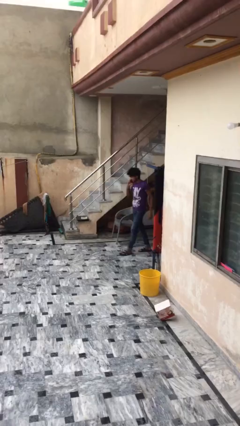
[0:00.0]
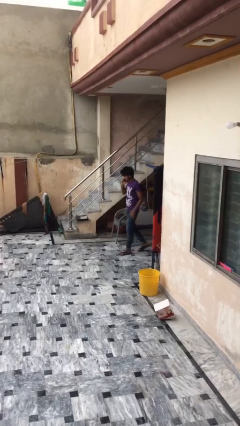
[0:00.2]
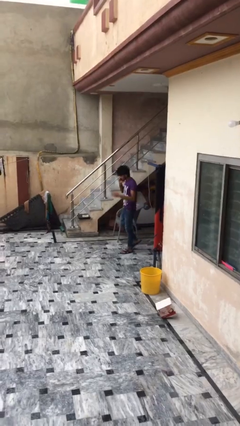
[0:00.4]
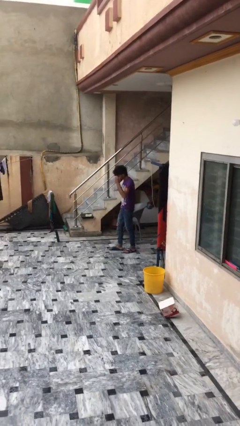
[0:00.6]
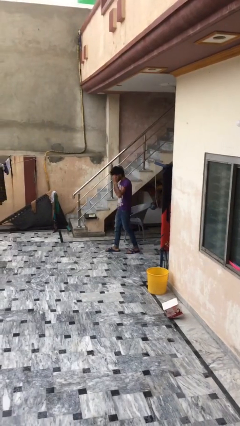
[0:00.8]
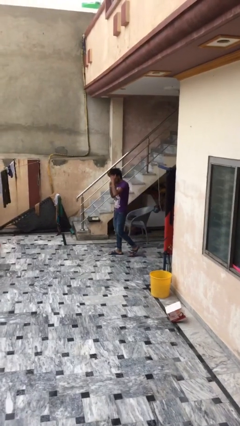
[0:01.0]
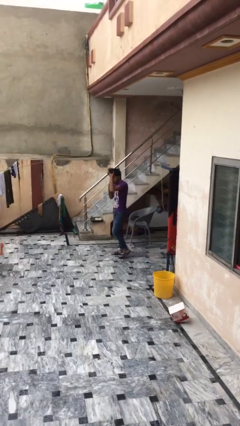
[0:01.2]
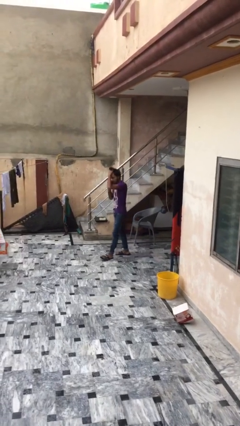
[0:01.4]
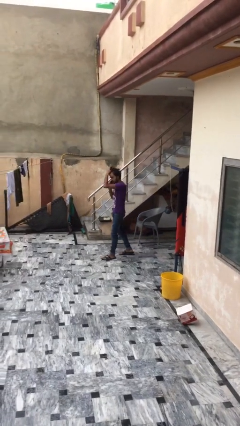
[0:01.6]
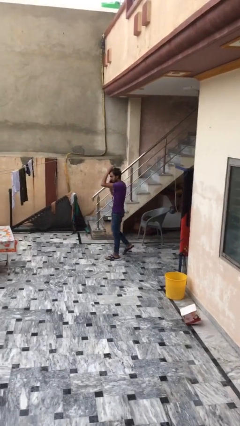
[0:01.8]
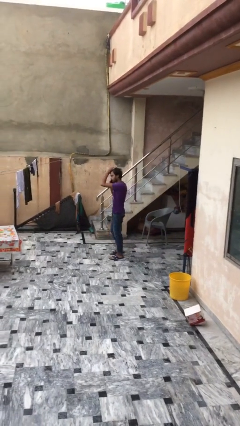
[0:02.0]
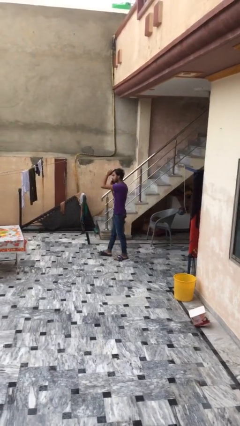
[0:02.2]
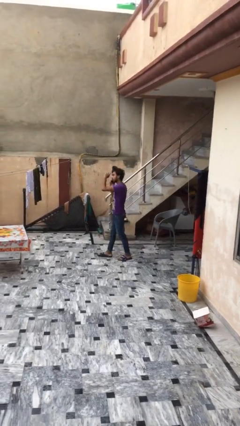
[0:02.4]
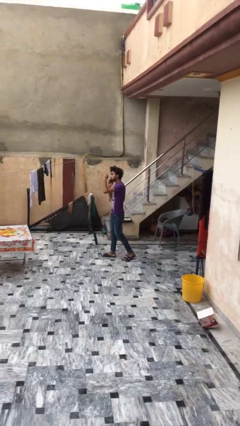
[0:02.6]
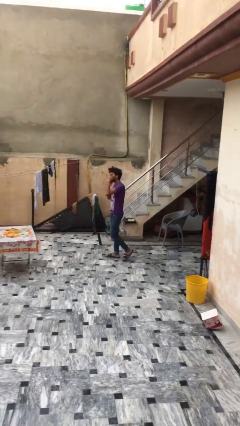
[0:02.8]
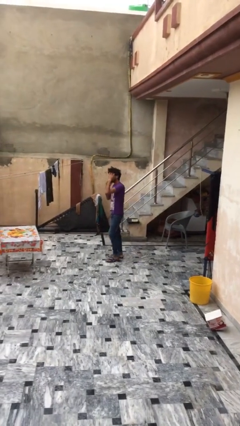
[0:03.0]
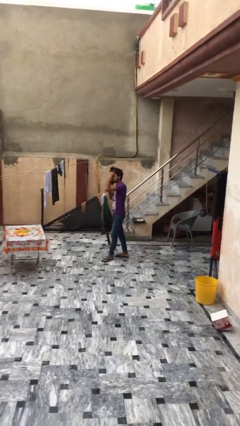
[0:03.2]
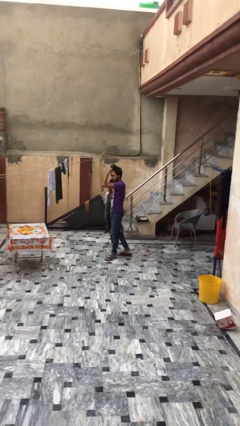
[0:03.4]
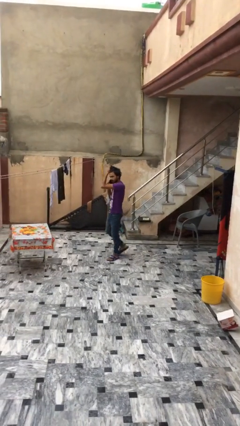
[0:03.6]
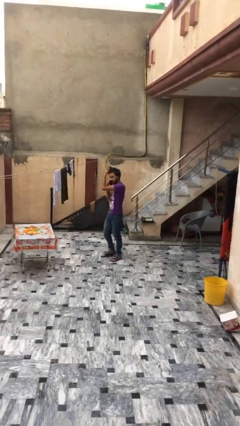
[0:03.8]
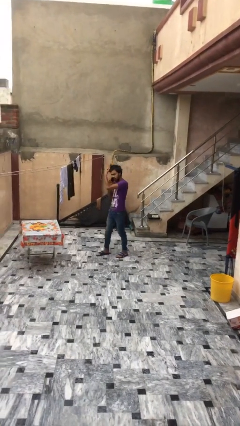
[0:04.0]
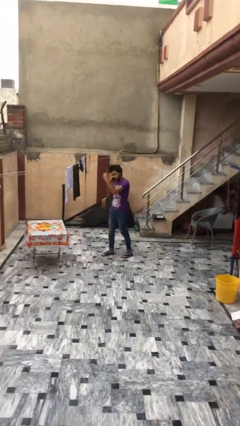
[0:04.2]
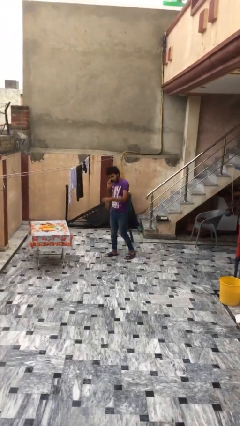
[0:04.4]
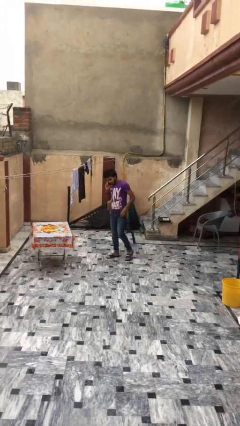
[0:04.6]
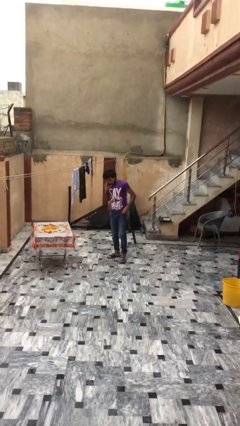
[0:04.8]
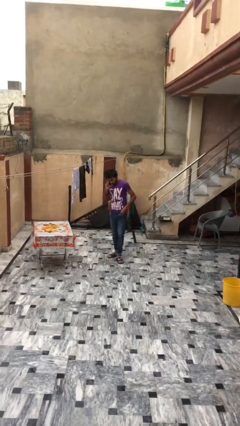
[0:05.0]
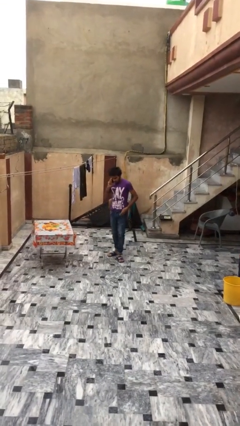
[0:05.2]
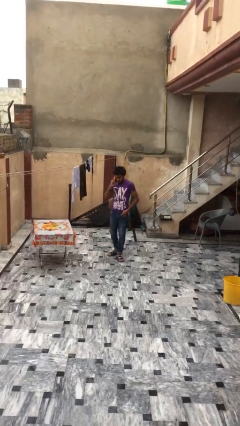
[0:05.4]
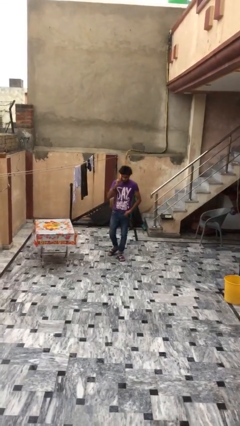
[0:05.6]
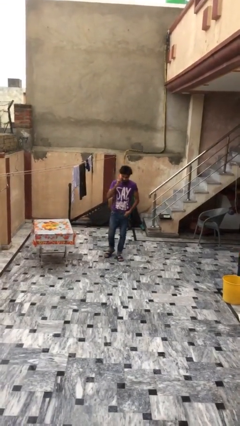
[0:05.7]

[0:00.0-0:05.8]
person enters scene through structure

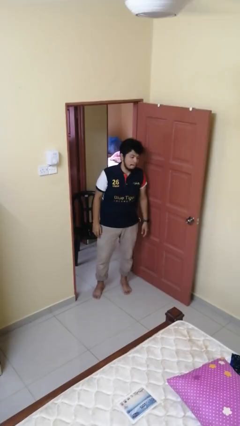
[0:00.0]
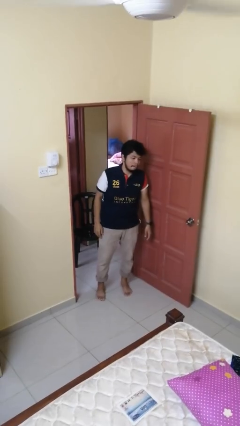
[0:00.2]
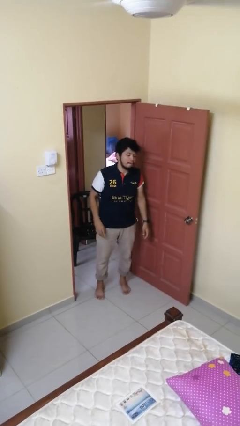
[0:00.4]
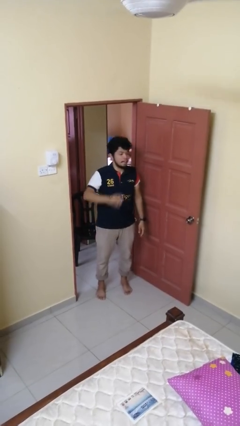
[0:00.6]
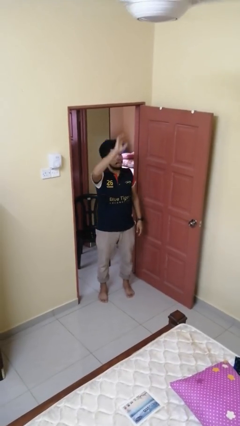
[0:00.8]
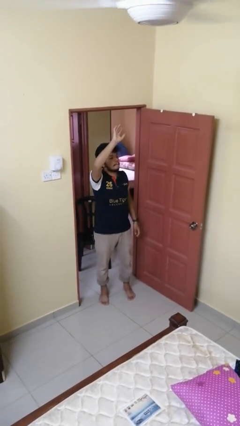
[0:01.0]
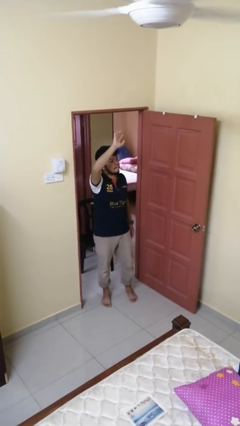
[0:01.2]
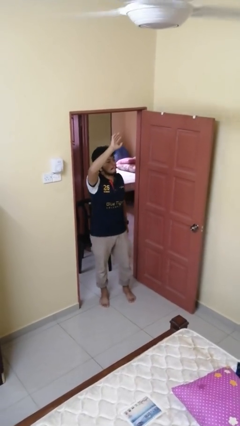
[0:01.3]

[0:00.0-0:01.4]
person gestures raise hand

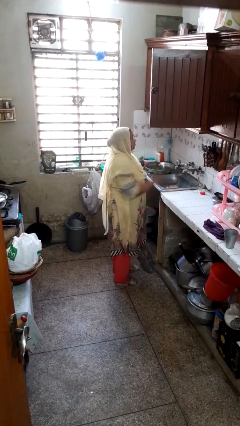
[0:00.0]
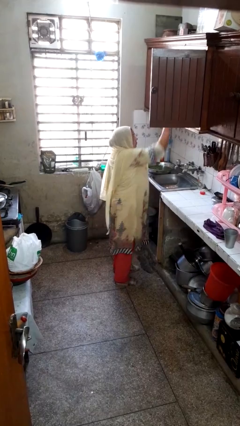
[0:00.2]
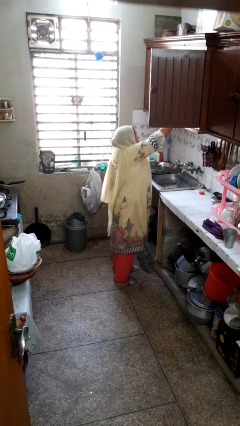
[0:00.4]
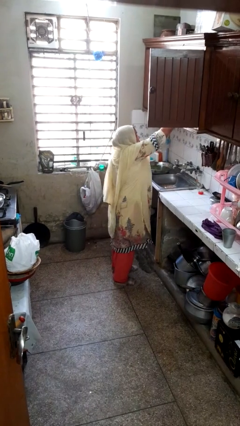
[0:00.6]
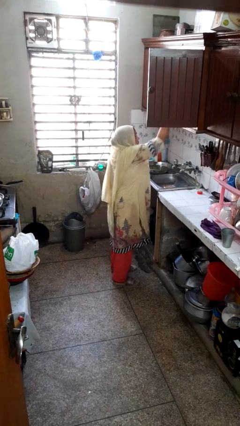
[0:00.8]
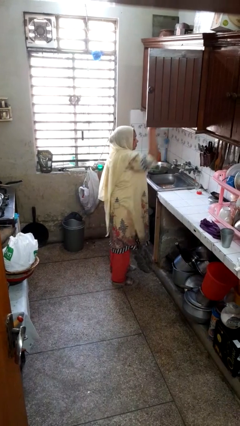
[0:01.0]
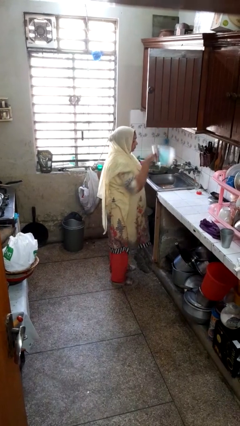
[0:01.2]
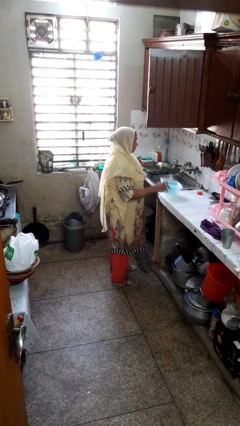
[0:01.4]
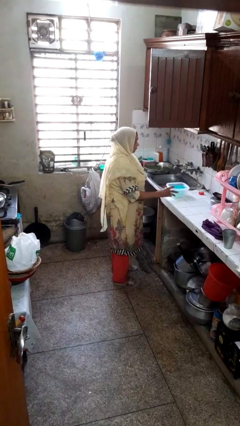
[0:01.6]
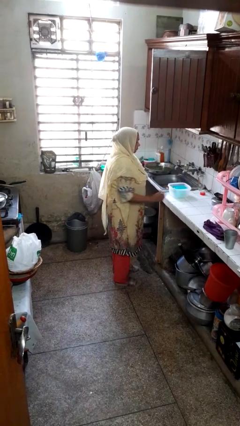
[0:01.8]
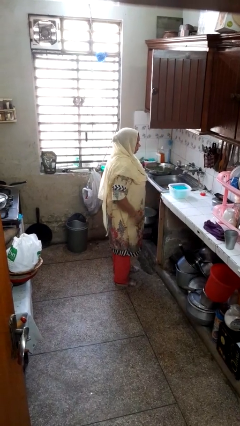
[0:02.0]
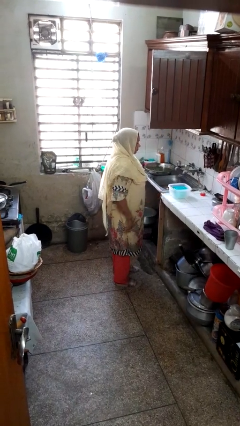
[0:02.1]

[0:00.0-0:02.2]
person takes object from cabinet

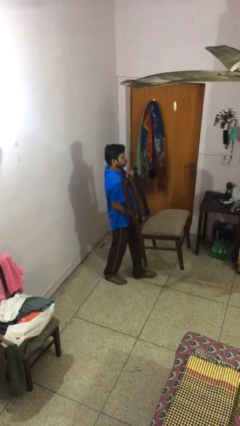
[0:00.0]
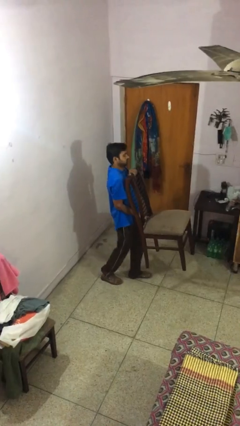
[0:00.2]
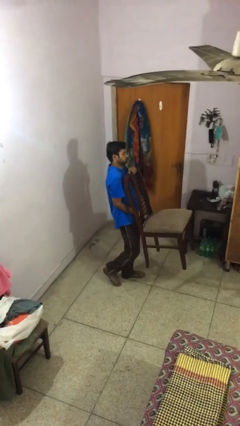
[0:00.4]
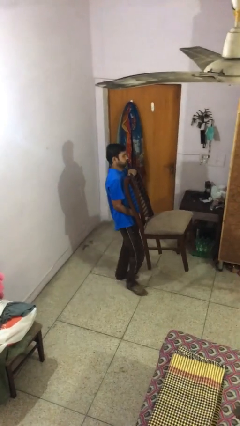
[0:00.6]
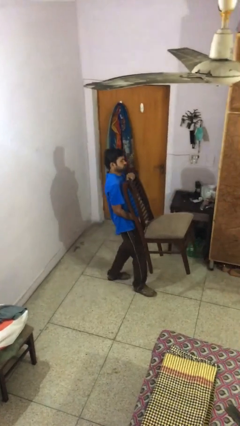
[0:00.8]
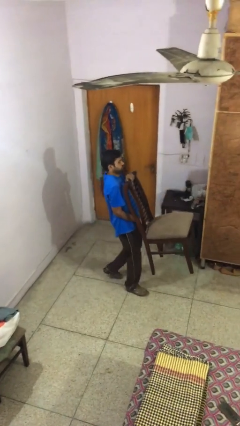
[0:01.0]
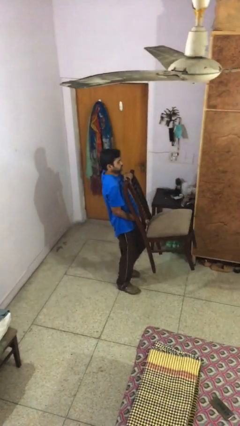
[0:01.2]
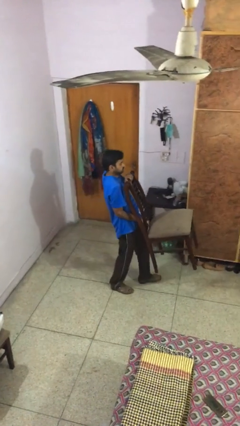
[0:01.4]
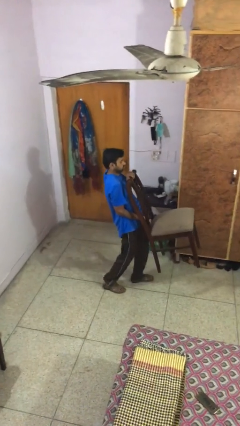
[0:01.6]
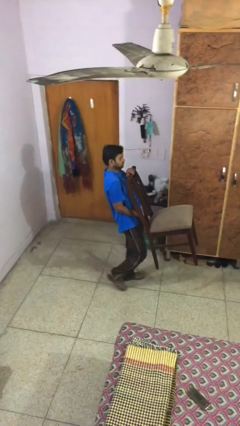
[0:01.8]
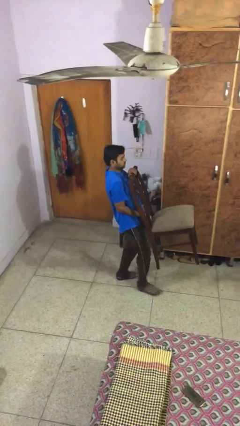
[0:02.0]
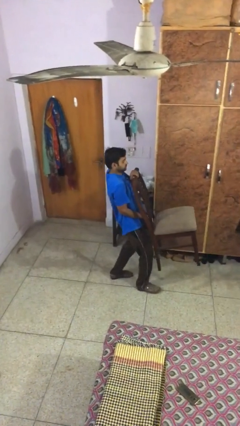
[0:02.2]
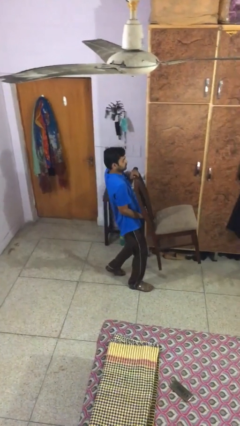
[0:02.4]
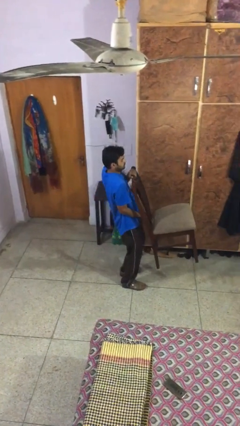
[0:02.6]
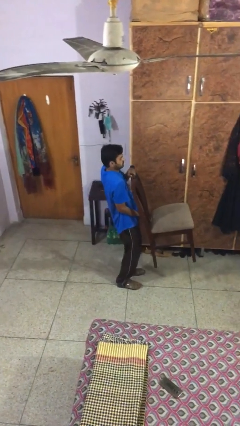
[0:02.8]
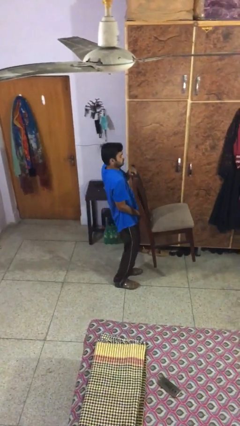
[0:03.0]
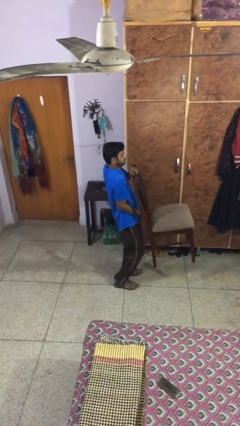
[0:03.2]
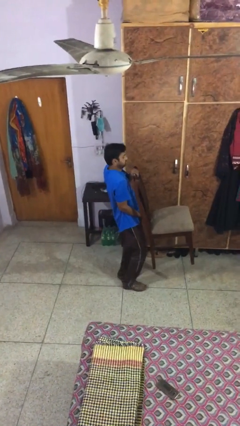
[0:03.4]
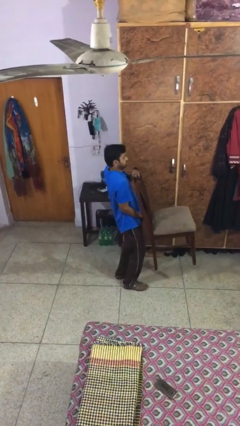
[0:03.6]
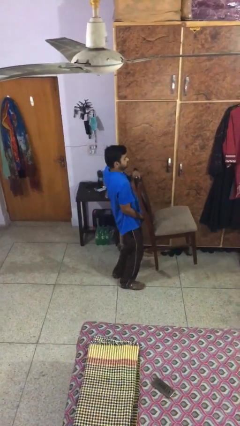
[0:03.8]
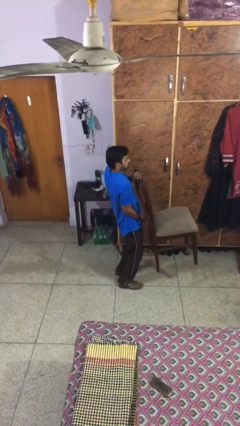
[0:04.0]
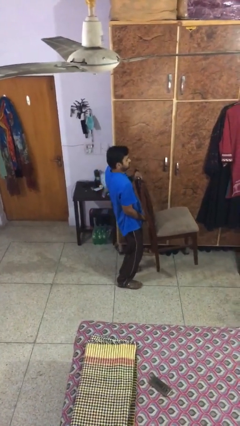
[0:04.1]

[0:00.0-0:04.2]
person carries heavy object

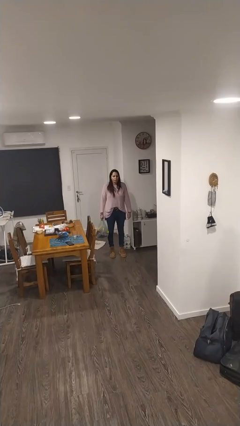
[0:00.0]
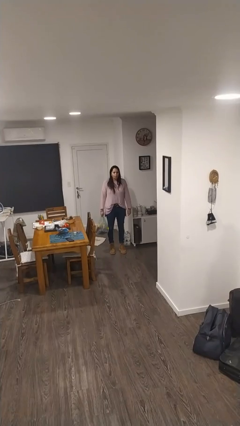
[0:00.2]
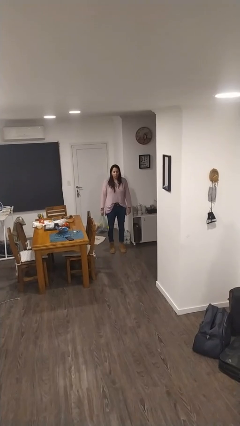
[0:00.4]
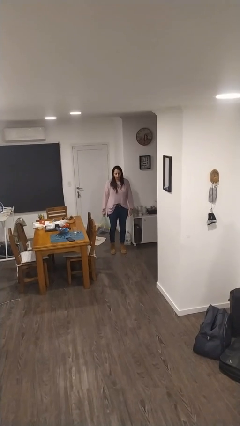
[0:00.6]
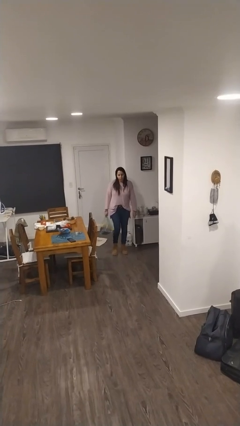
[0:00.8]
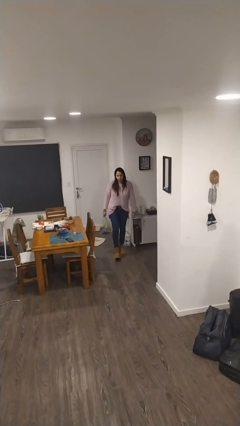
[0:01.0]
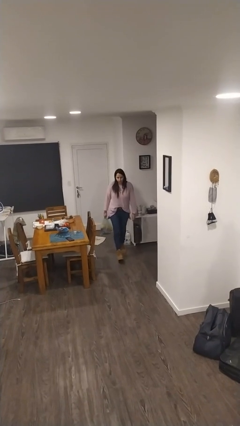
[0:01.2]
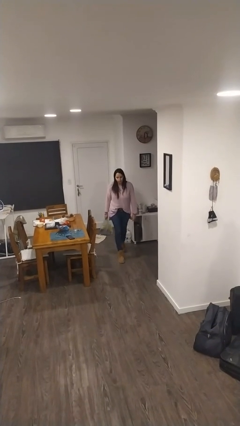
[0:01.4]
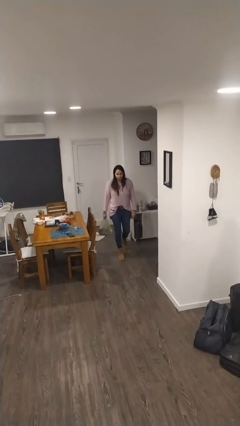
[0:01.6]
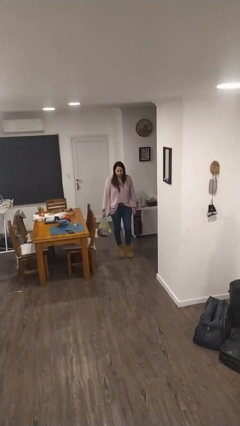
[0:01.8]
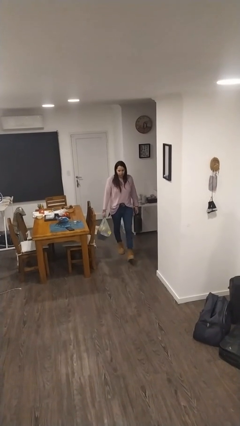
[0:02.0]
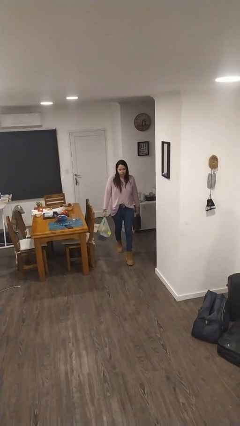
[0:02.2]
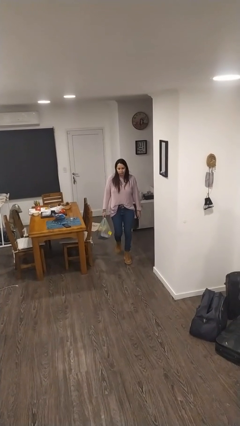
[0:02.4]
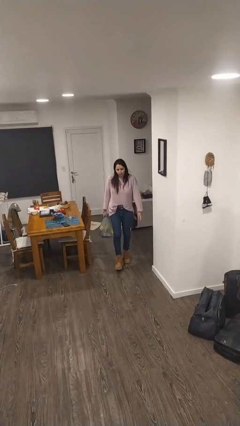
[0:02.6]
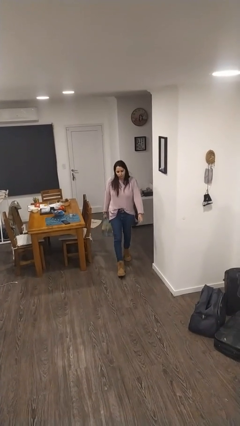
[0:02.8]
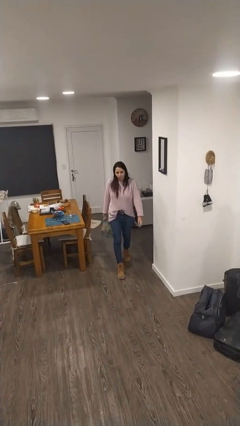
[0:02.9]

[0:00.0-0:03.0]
person carries groceries

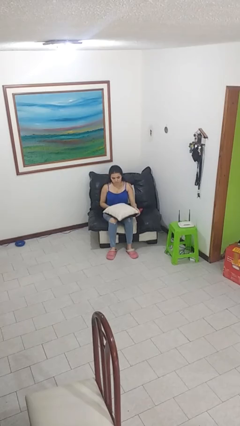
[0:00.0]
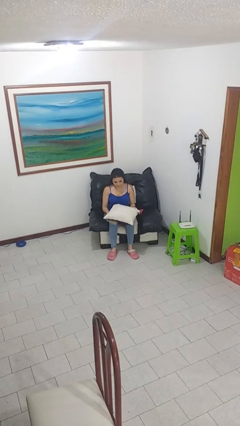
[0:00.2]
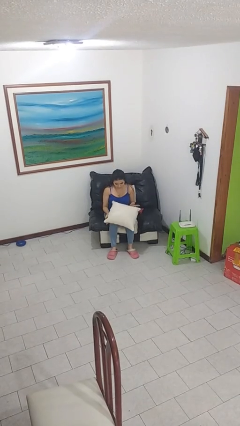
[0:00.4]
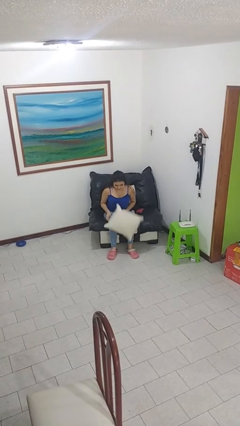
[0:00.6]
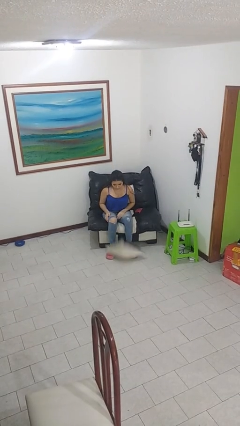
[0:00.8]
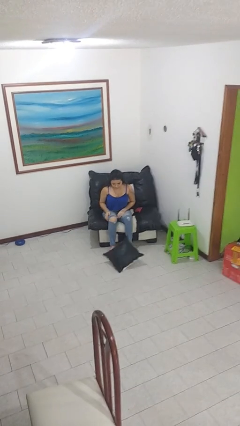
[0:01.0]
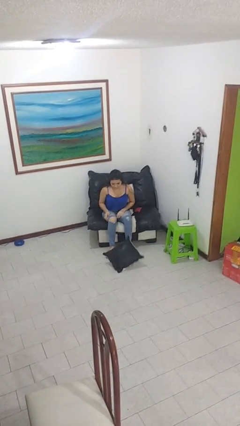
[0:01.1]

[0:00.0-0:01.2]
person drops object
